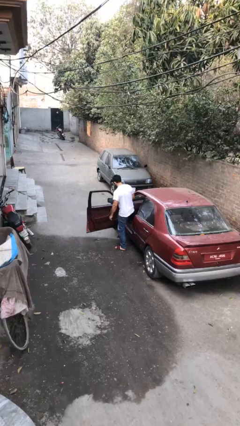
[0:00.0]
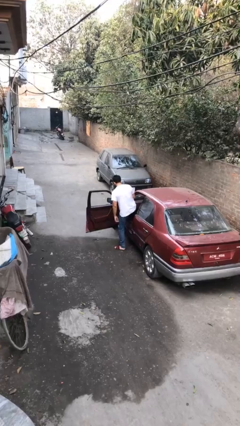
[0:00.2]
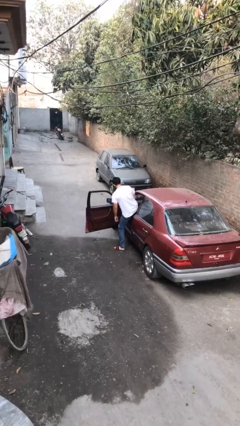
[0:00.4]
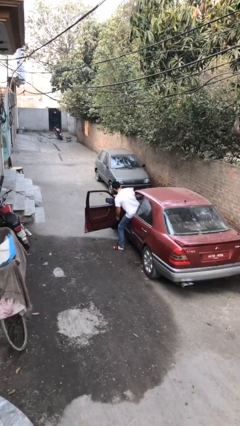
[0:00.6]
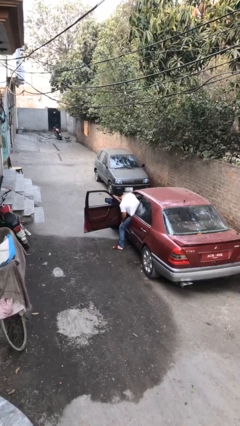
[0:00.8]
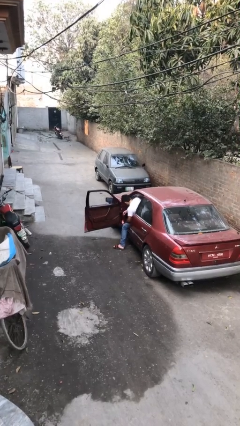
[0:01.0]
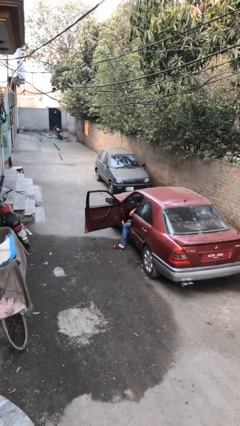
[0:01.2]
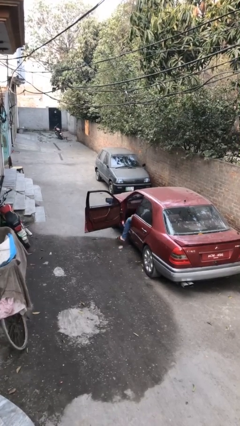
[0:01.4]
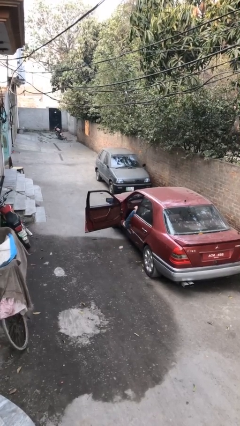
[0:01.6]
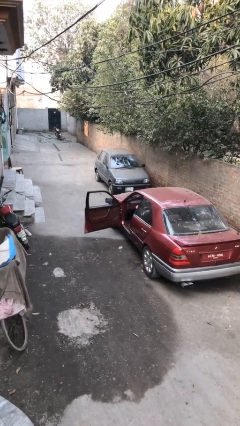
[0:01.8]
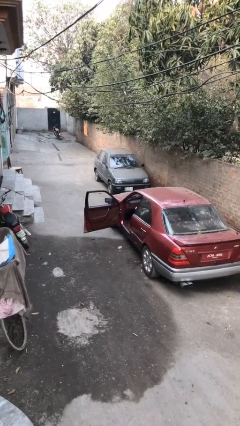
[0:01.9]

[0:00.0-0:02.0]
person enters car

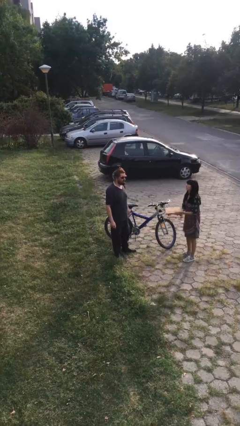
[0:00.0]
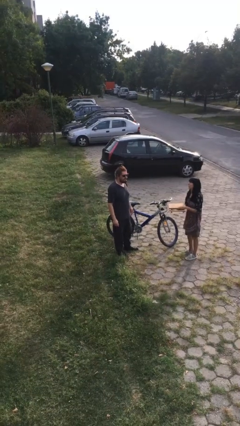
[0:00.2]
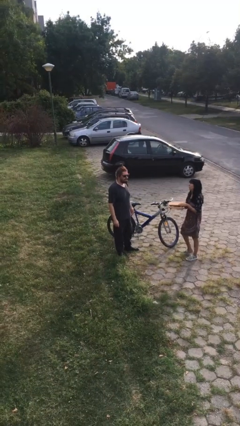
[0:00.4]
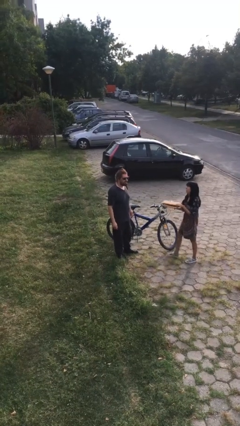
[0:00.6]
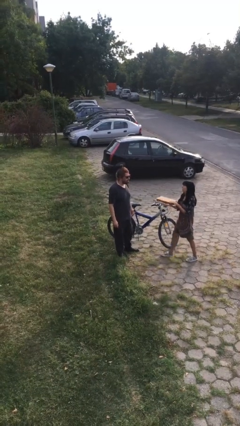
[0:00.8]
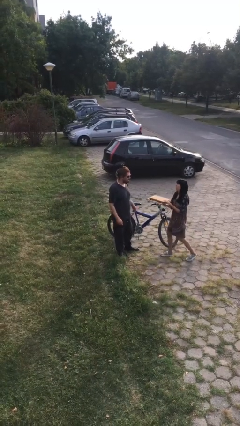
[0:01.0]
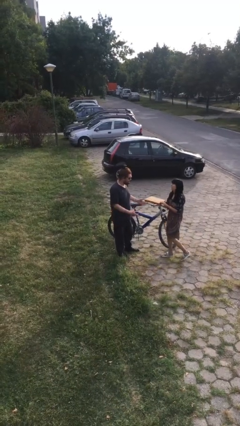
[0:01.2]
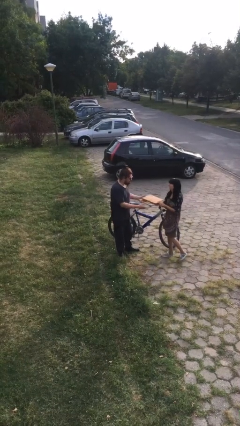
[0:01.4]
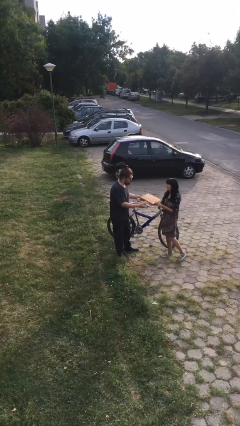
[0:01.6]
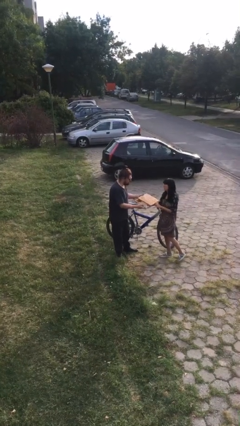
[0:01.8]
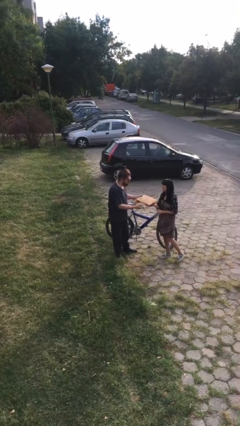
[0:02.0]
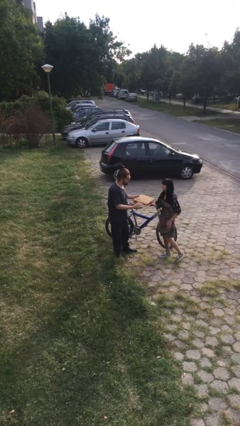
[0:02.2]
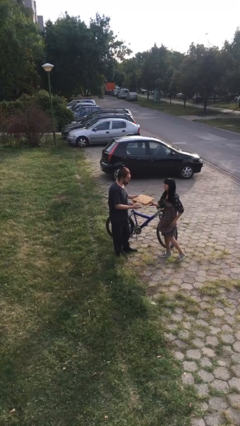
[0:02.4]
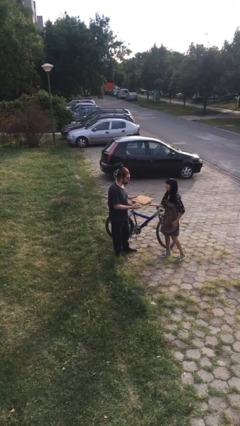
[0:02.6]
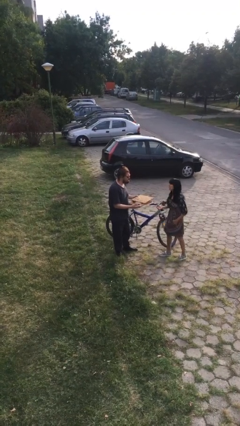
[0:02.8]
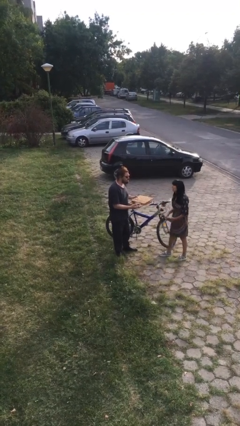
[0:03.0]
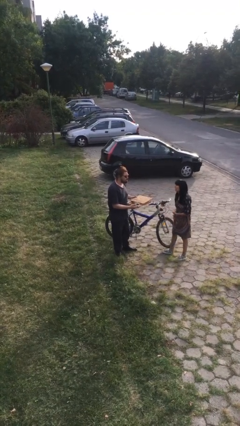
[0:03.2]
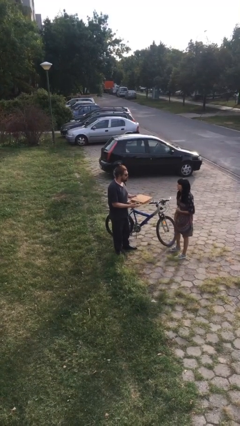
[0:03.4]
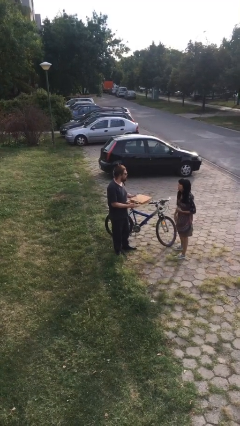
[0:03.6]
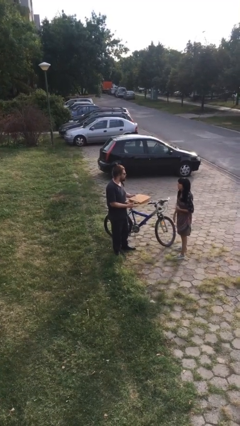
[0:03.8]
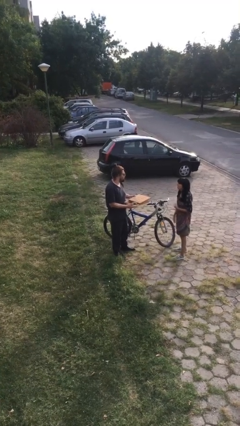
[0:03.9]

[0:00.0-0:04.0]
person transfers object to person

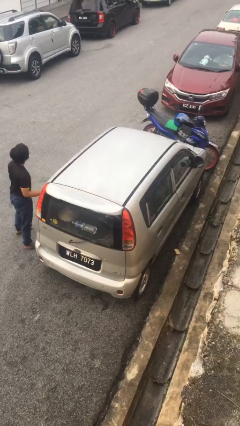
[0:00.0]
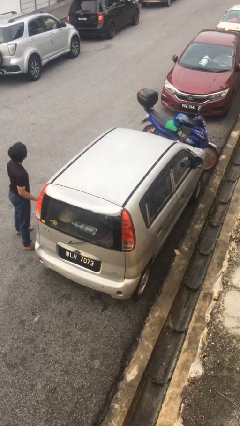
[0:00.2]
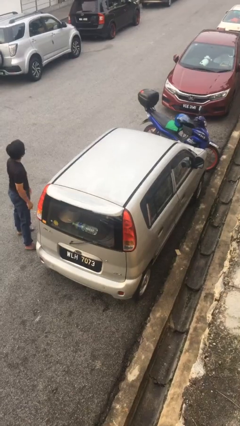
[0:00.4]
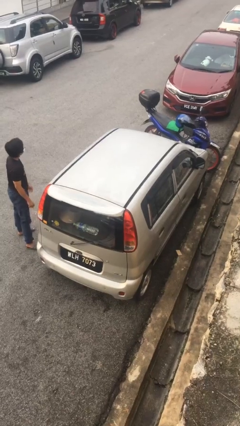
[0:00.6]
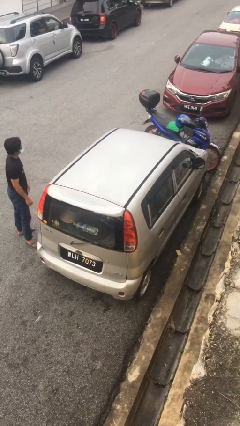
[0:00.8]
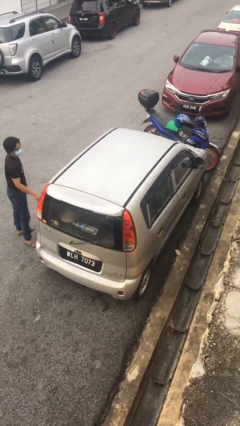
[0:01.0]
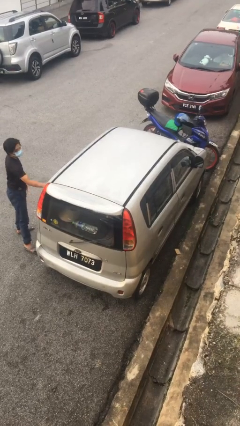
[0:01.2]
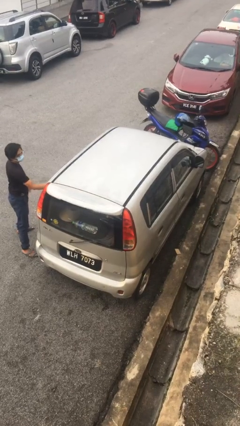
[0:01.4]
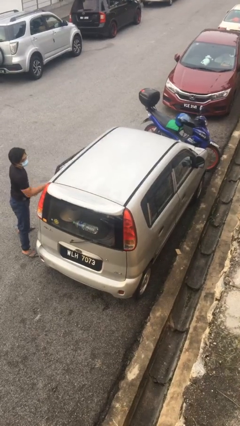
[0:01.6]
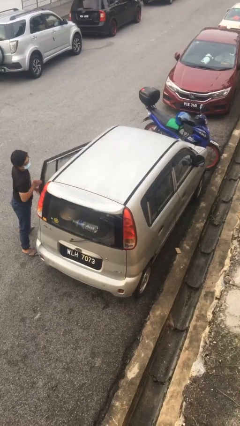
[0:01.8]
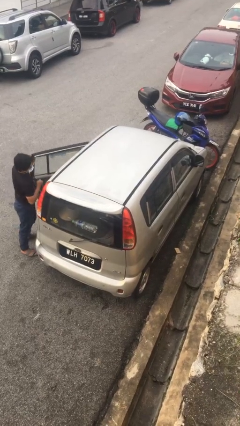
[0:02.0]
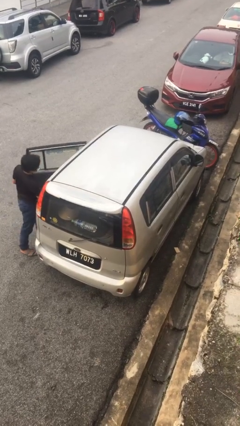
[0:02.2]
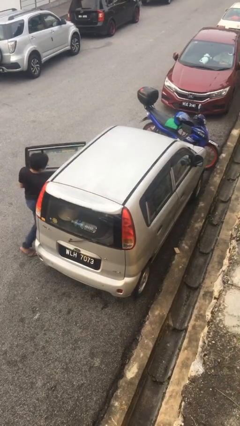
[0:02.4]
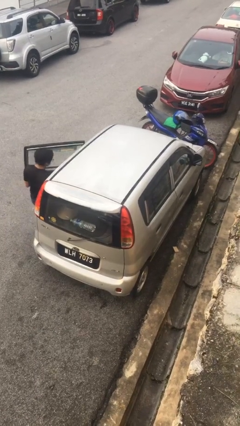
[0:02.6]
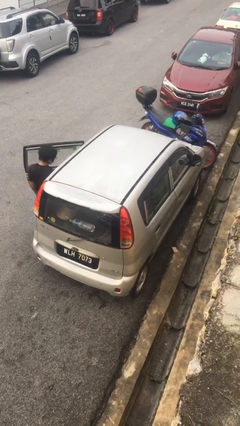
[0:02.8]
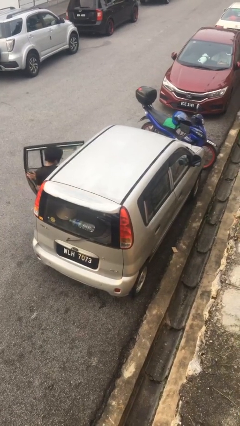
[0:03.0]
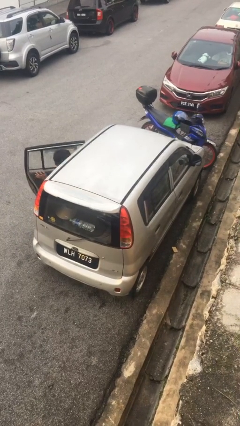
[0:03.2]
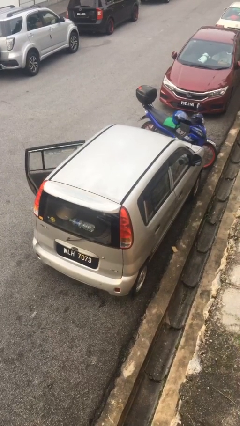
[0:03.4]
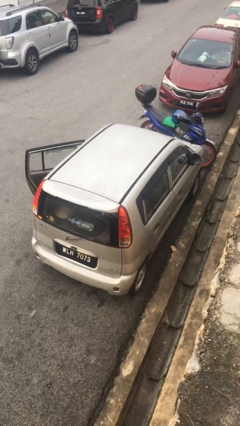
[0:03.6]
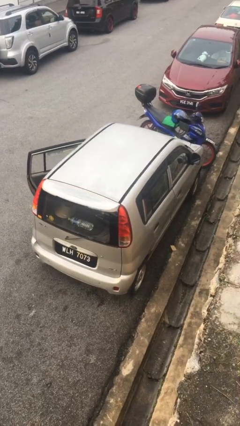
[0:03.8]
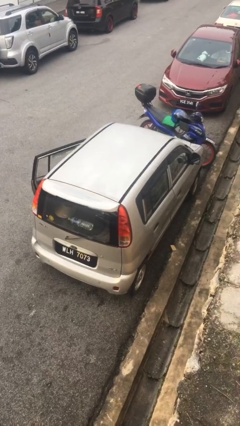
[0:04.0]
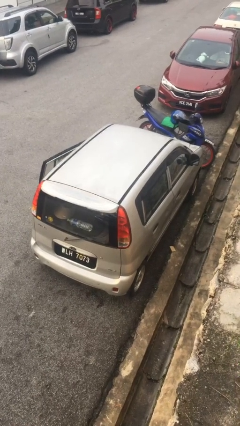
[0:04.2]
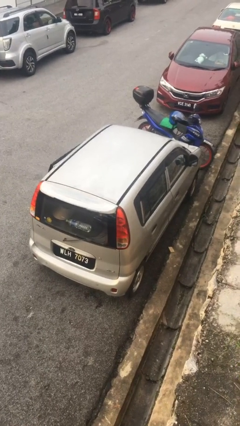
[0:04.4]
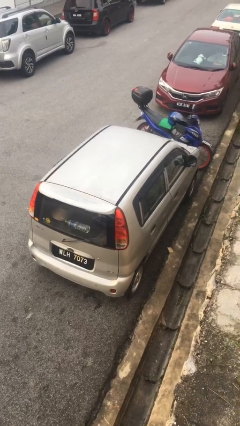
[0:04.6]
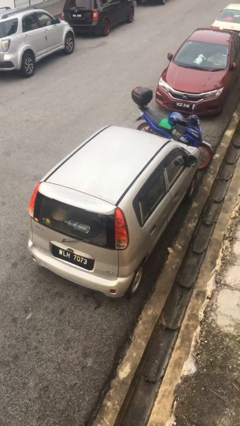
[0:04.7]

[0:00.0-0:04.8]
car picks up person

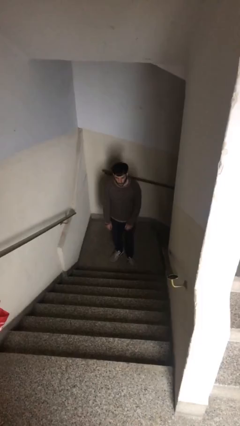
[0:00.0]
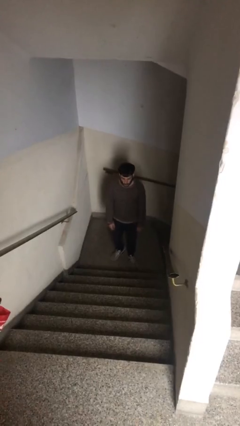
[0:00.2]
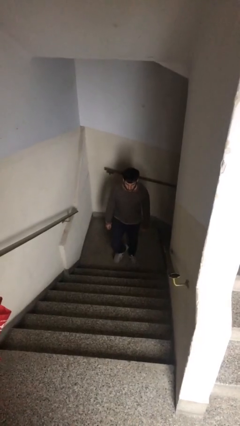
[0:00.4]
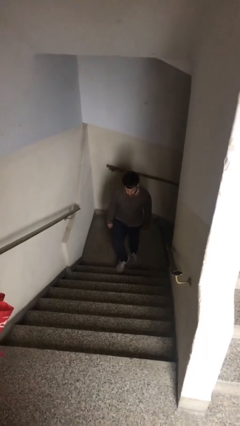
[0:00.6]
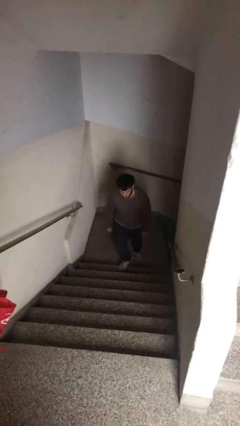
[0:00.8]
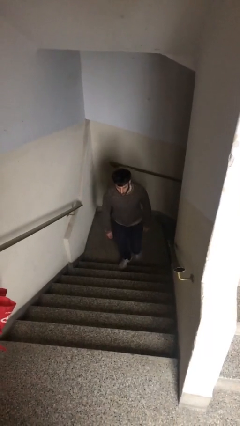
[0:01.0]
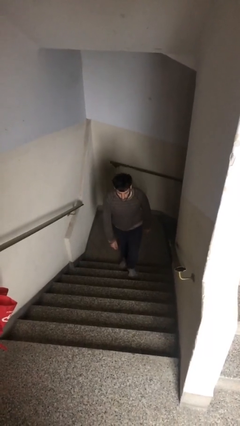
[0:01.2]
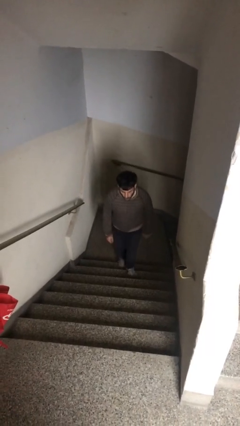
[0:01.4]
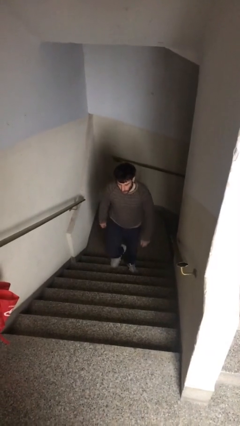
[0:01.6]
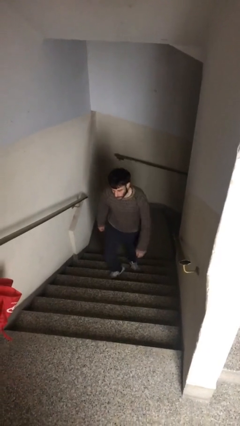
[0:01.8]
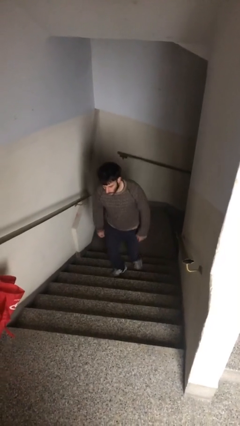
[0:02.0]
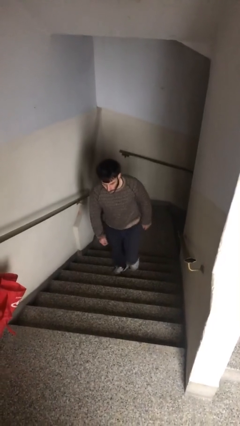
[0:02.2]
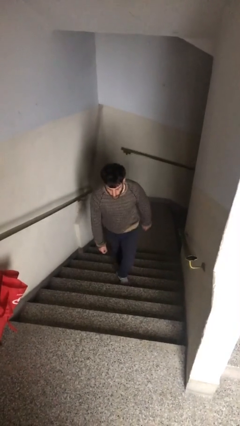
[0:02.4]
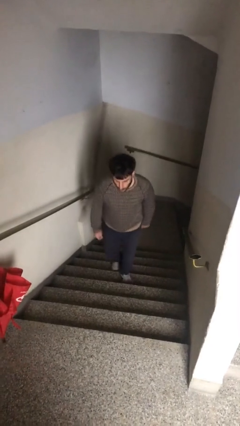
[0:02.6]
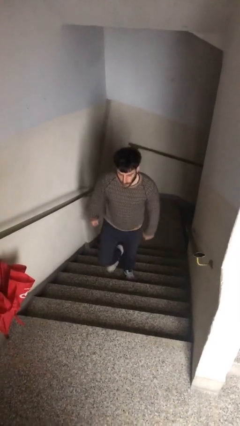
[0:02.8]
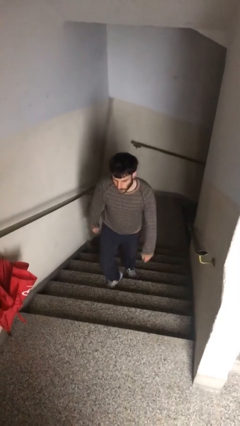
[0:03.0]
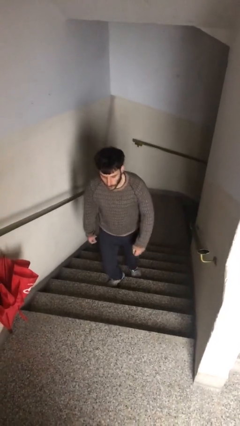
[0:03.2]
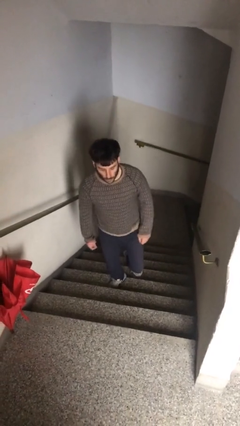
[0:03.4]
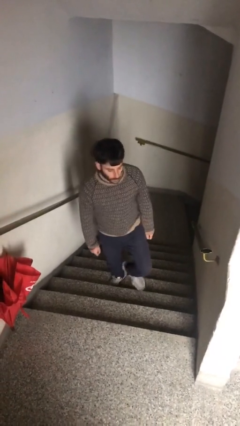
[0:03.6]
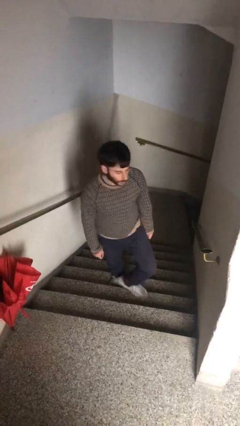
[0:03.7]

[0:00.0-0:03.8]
person climbs up stairs

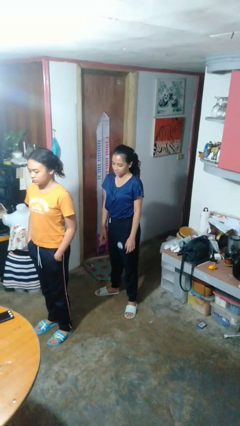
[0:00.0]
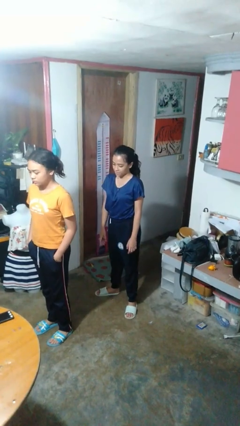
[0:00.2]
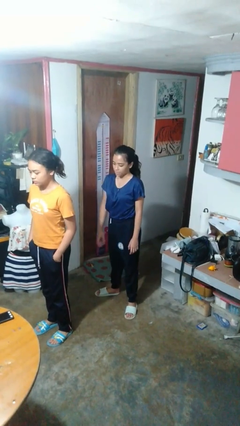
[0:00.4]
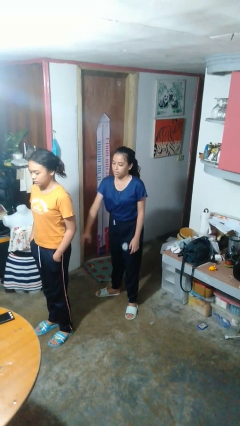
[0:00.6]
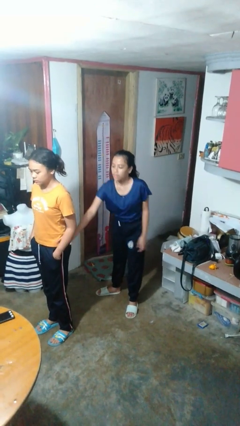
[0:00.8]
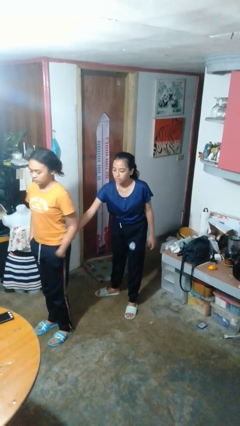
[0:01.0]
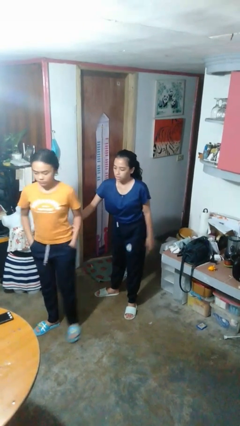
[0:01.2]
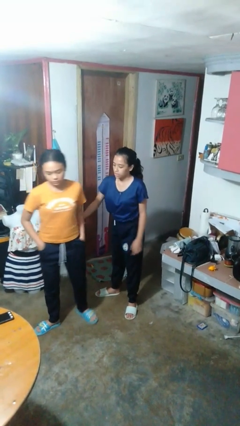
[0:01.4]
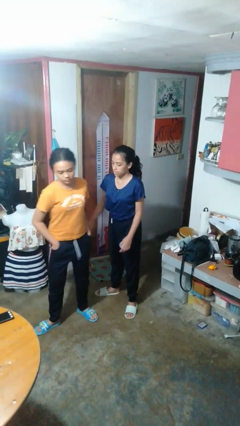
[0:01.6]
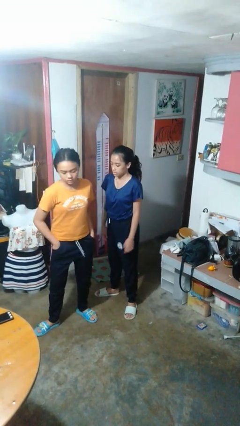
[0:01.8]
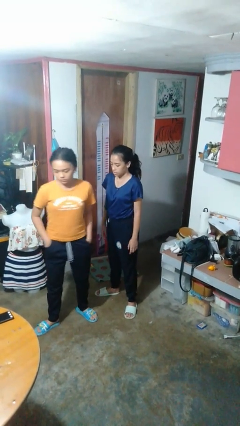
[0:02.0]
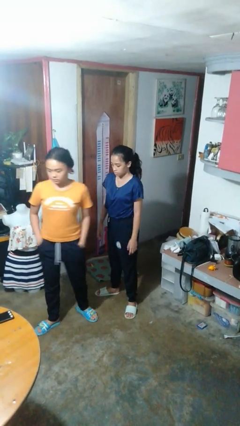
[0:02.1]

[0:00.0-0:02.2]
person grabs person by forearm

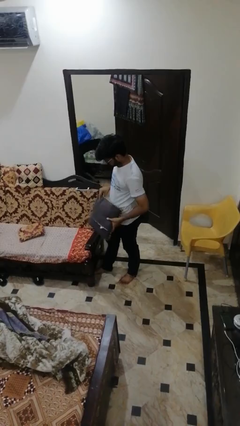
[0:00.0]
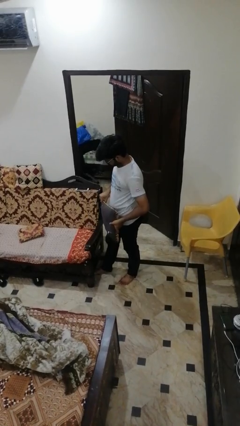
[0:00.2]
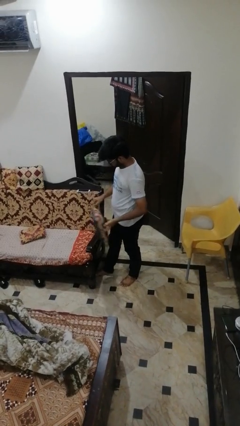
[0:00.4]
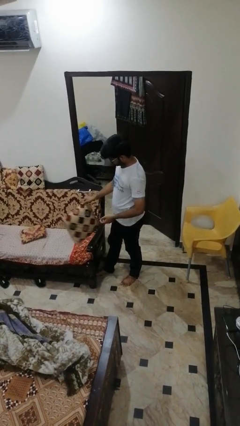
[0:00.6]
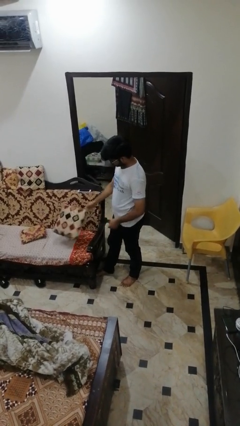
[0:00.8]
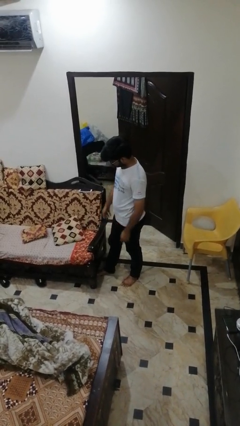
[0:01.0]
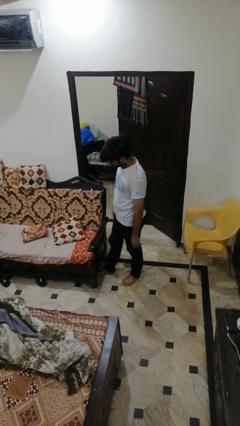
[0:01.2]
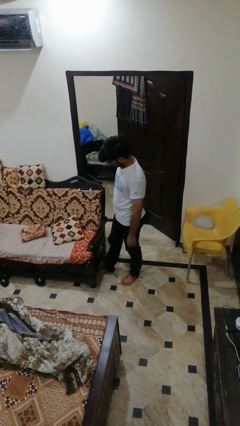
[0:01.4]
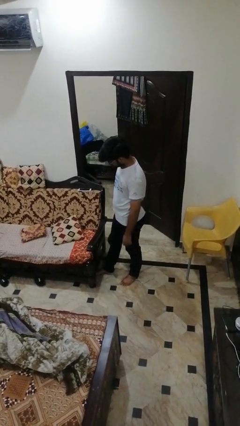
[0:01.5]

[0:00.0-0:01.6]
person puts down object on couch
